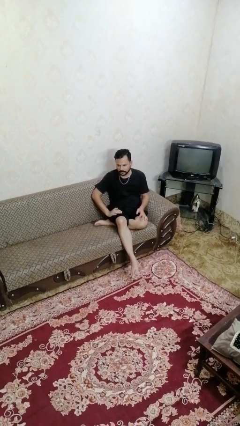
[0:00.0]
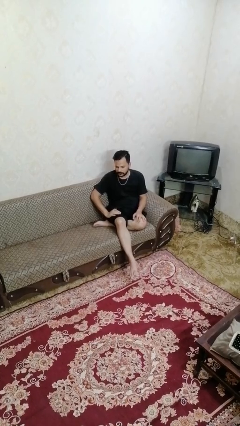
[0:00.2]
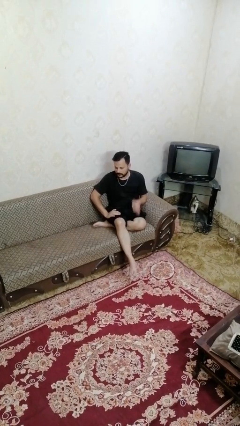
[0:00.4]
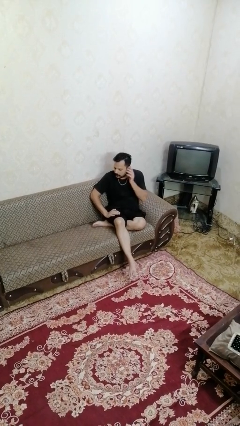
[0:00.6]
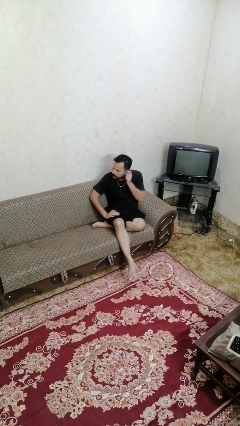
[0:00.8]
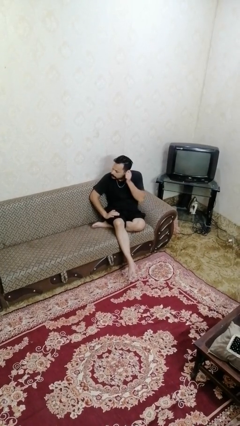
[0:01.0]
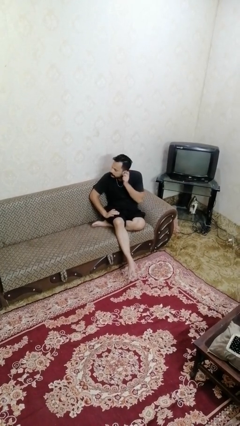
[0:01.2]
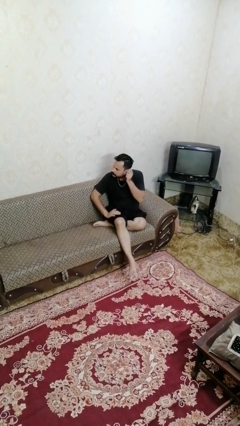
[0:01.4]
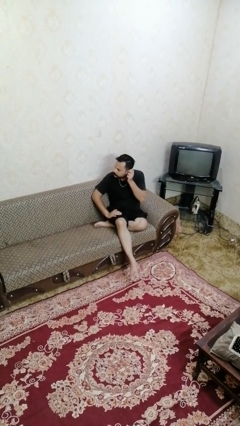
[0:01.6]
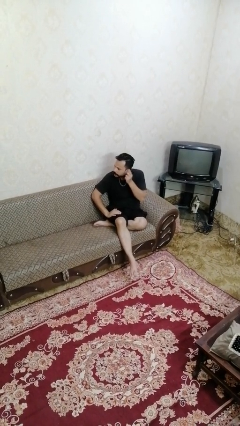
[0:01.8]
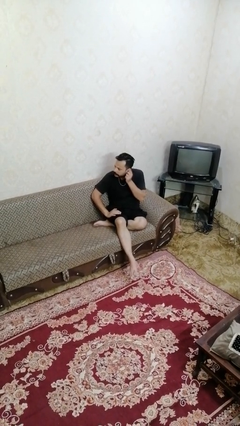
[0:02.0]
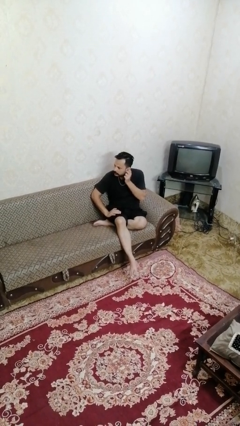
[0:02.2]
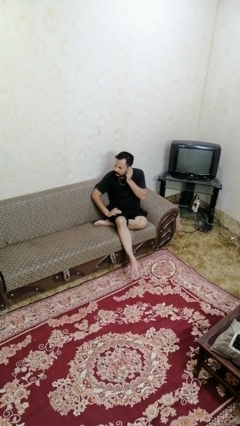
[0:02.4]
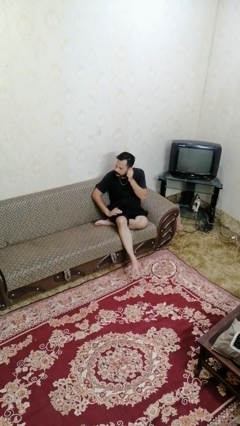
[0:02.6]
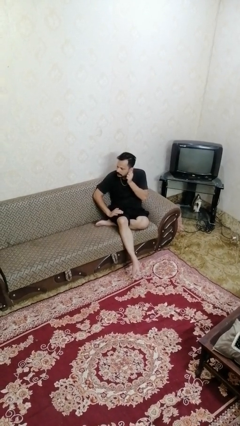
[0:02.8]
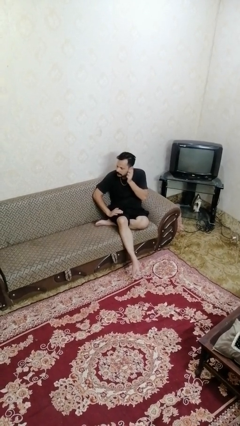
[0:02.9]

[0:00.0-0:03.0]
person touches earlobe

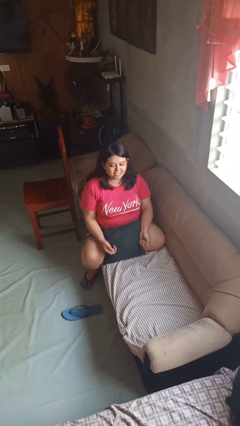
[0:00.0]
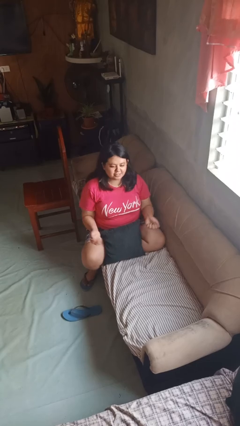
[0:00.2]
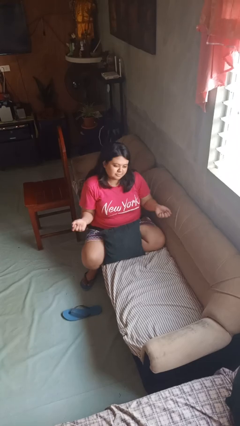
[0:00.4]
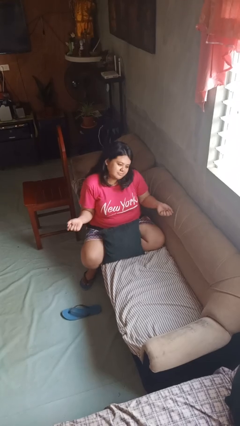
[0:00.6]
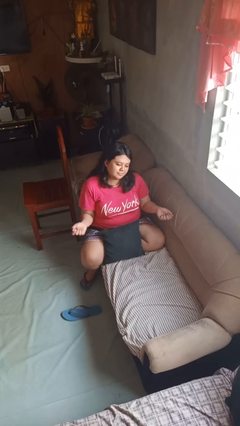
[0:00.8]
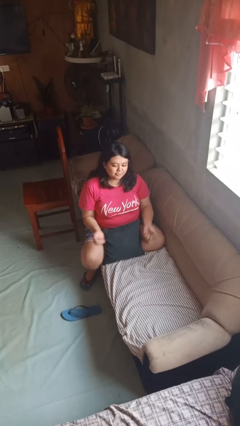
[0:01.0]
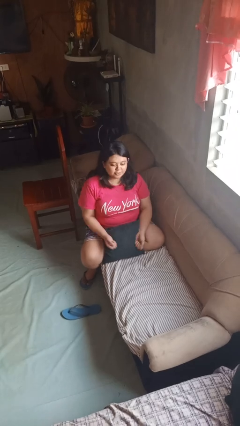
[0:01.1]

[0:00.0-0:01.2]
person shrugs

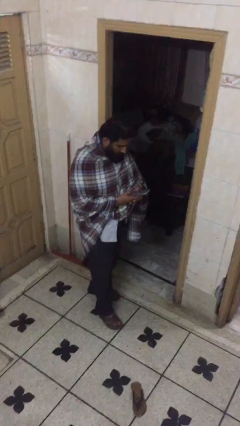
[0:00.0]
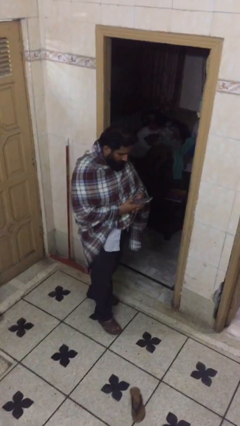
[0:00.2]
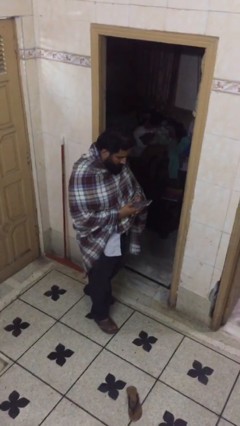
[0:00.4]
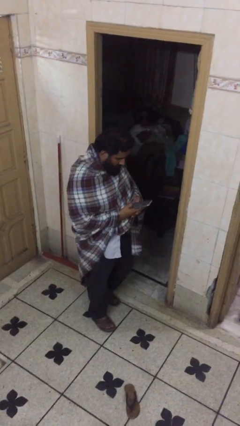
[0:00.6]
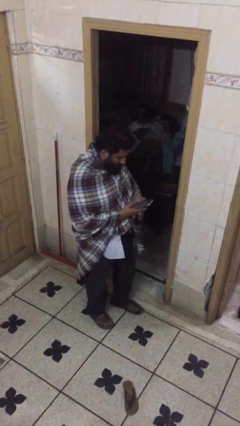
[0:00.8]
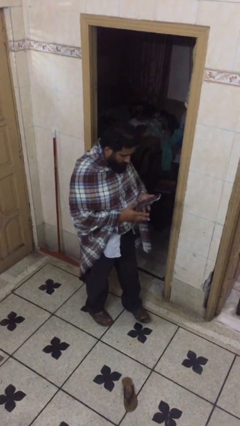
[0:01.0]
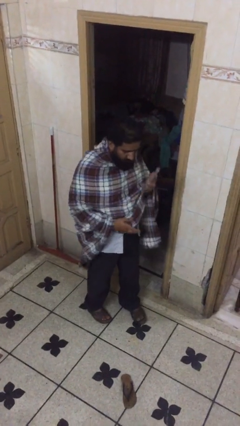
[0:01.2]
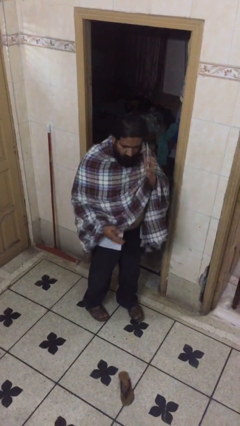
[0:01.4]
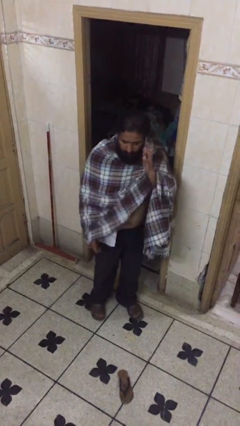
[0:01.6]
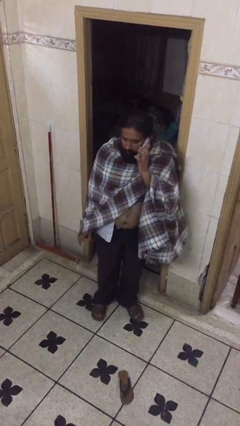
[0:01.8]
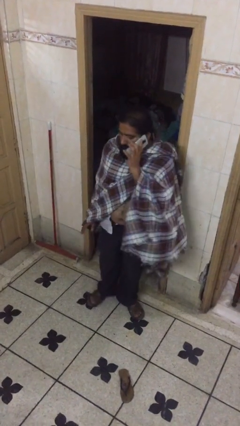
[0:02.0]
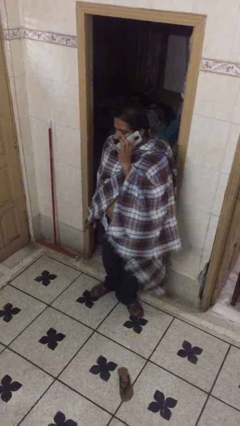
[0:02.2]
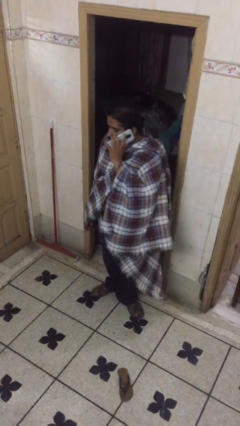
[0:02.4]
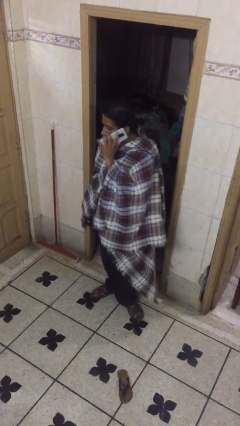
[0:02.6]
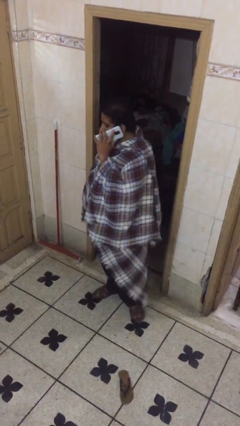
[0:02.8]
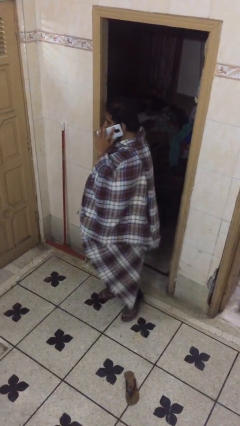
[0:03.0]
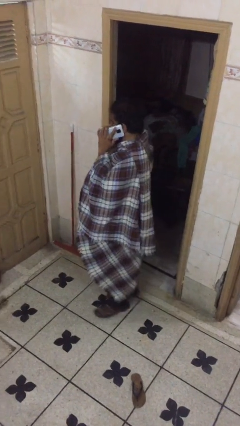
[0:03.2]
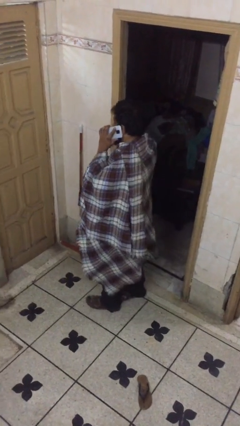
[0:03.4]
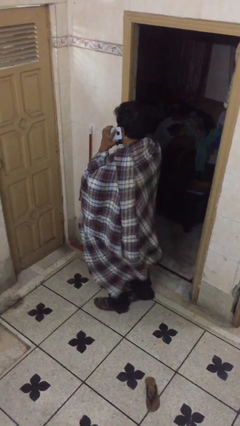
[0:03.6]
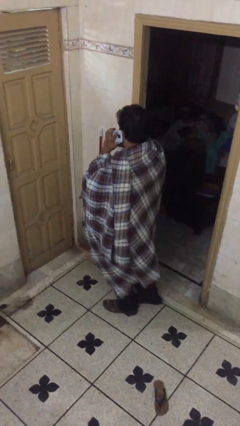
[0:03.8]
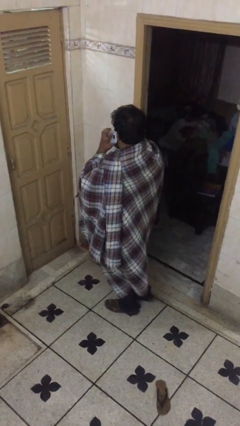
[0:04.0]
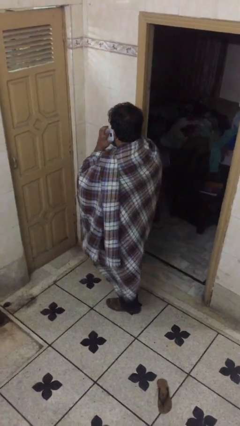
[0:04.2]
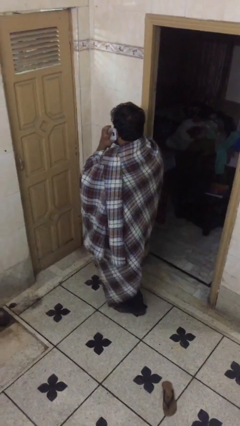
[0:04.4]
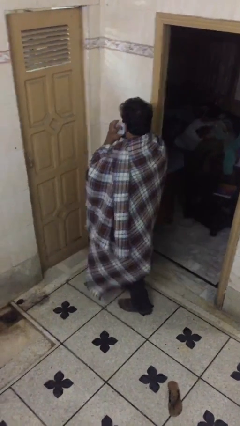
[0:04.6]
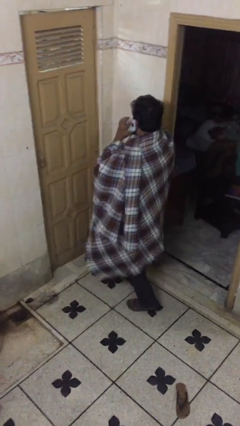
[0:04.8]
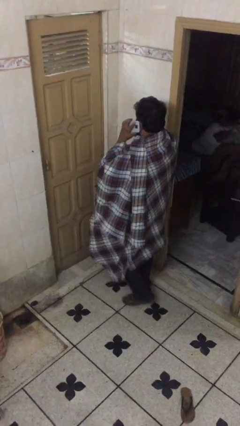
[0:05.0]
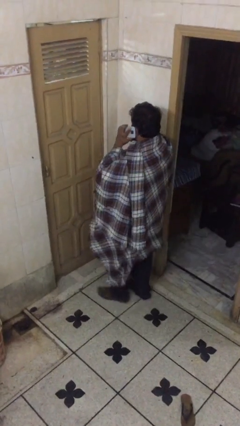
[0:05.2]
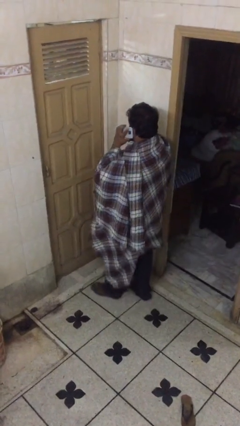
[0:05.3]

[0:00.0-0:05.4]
person talks on phone

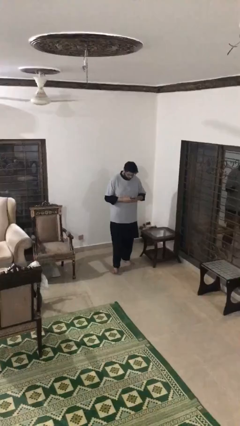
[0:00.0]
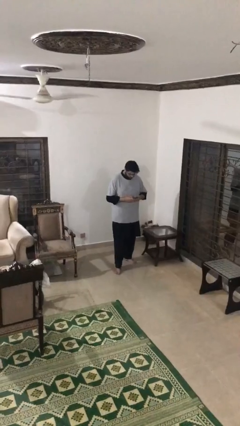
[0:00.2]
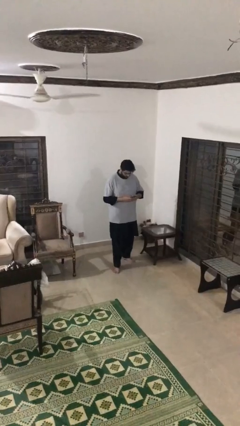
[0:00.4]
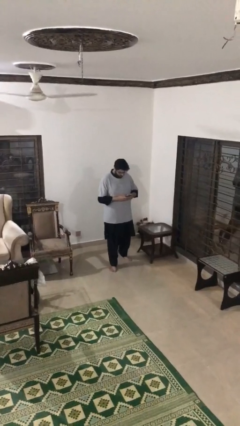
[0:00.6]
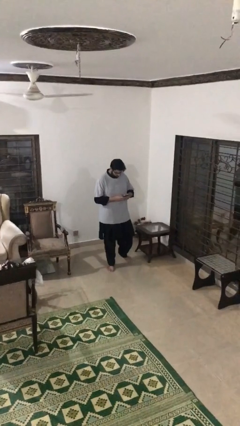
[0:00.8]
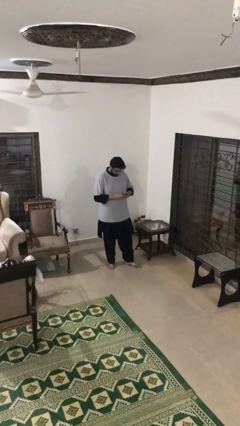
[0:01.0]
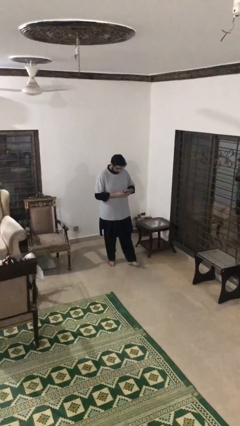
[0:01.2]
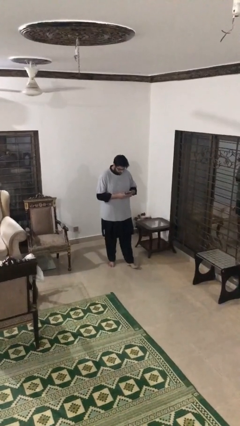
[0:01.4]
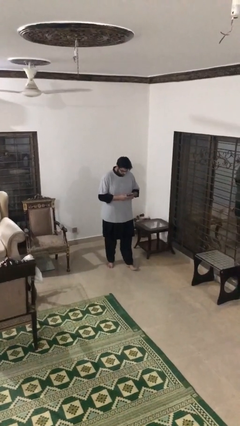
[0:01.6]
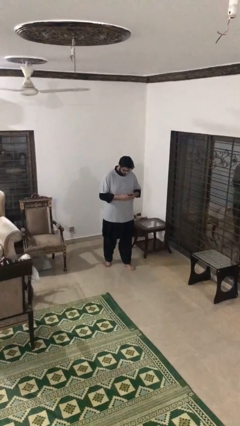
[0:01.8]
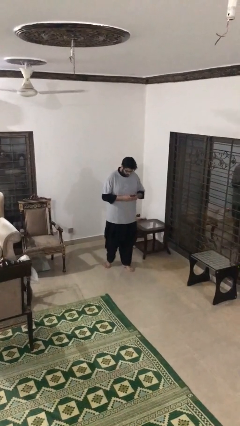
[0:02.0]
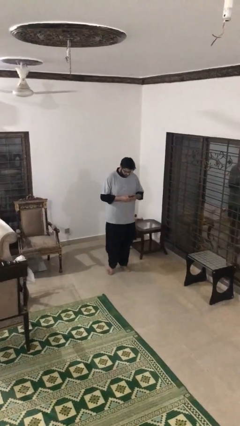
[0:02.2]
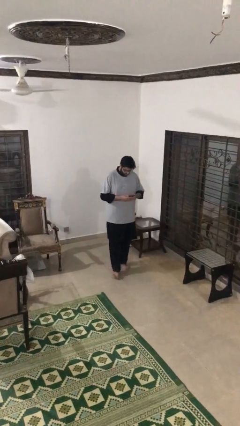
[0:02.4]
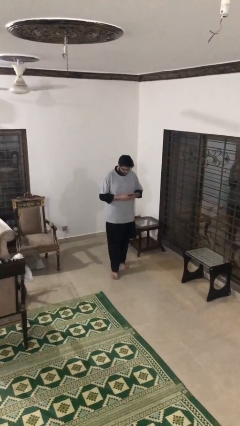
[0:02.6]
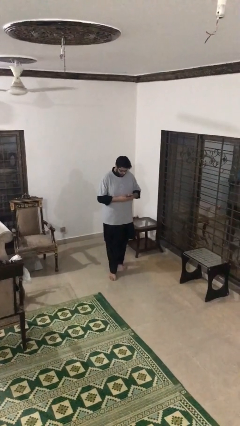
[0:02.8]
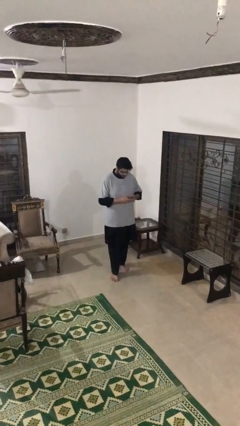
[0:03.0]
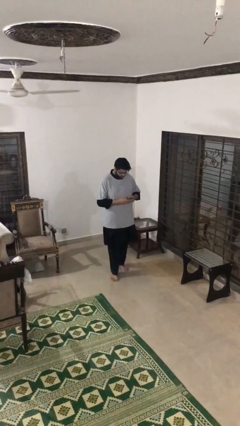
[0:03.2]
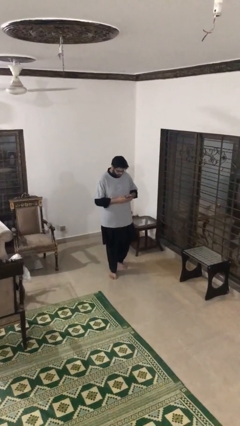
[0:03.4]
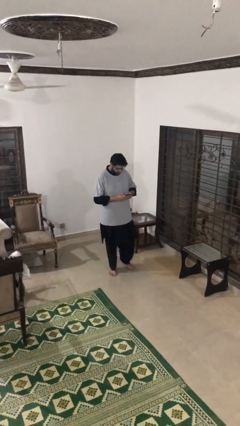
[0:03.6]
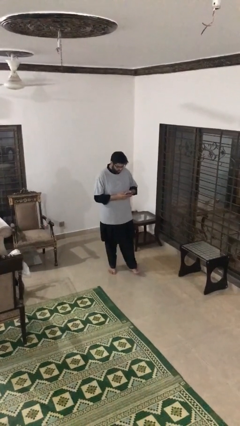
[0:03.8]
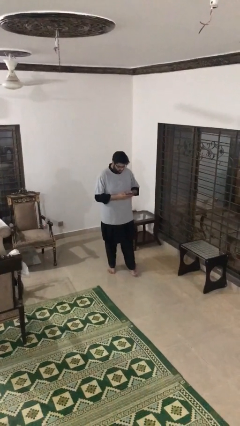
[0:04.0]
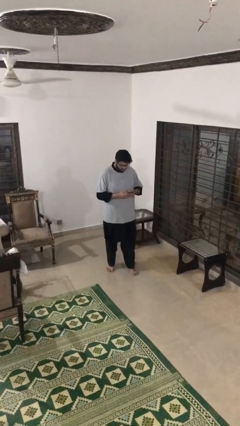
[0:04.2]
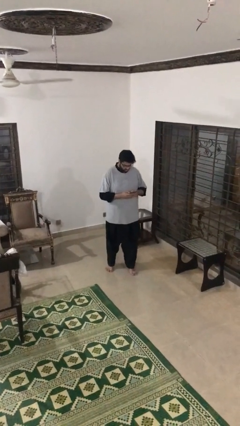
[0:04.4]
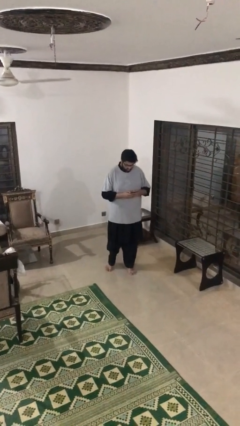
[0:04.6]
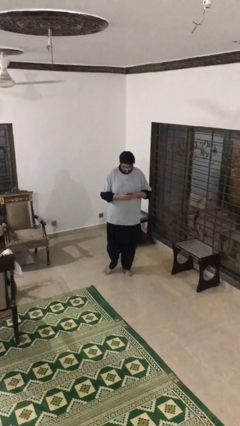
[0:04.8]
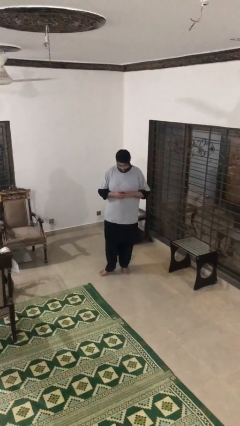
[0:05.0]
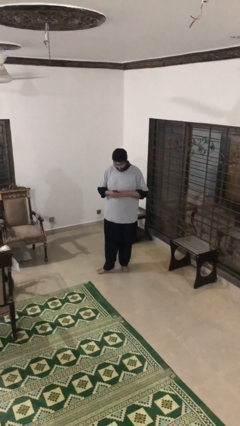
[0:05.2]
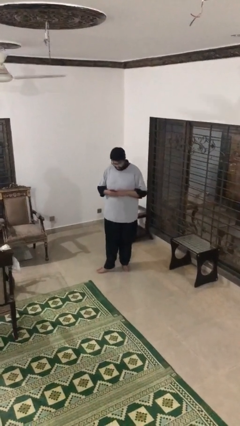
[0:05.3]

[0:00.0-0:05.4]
person texts on phone

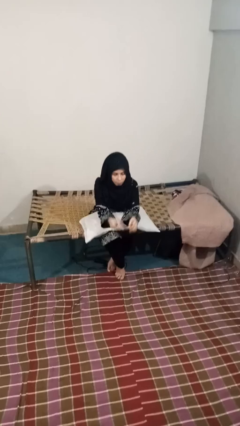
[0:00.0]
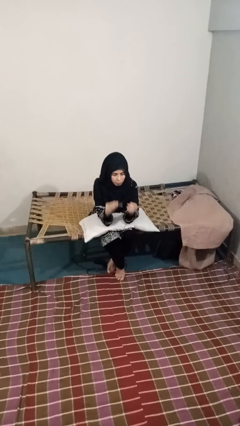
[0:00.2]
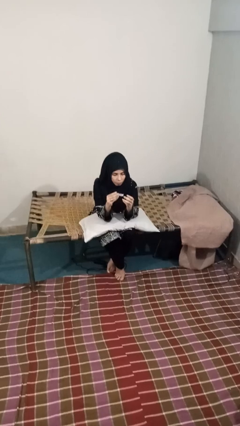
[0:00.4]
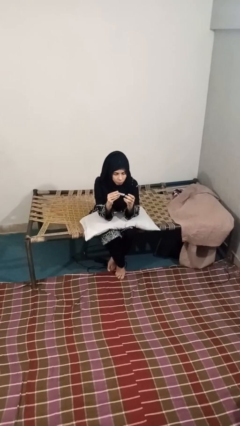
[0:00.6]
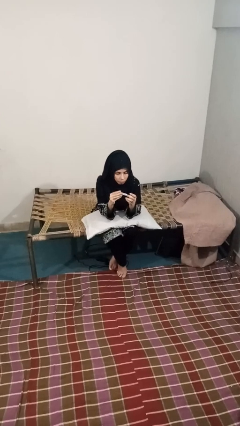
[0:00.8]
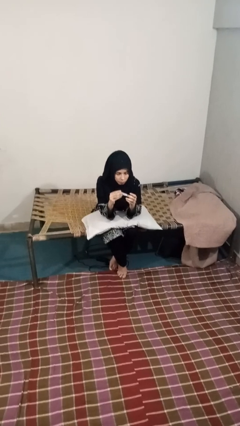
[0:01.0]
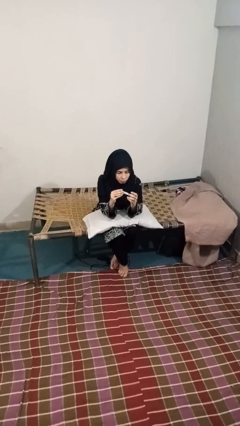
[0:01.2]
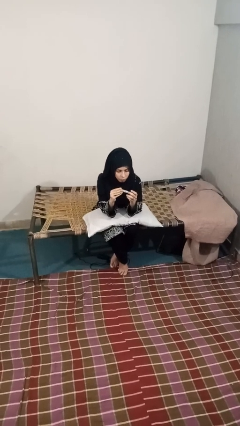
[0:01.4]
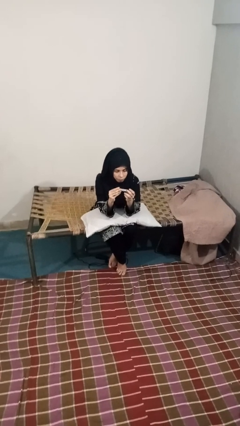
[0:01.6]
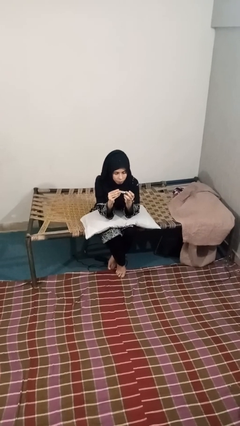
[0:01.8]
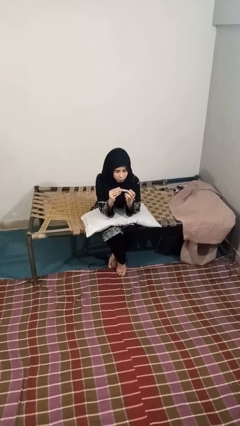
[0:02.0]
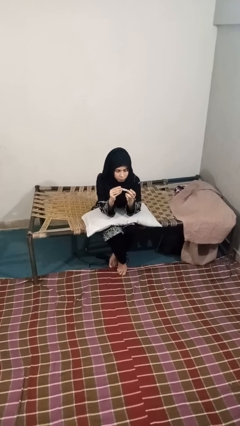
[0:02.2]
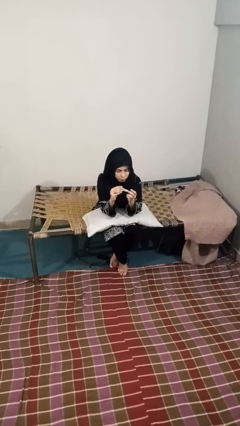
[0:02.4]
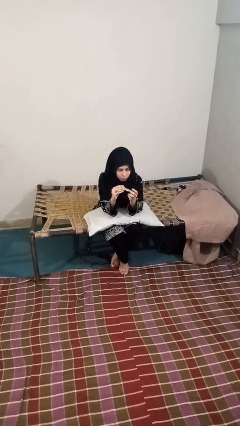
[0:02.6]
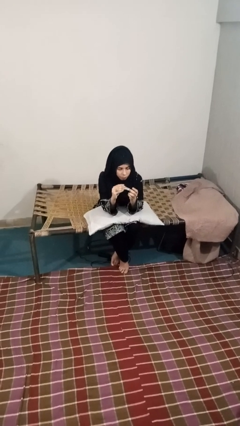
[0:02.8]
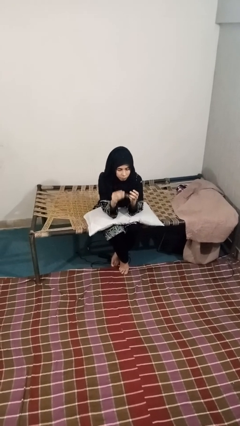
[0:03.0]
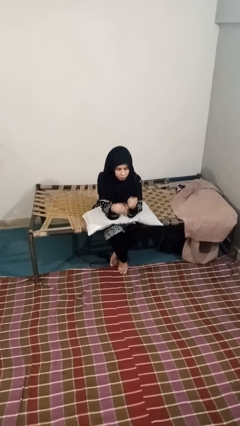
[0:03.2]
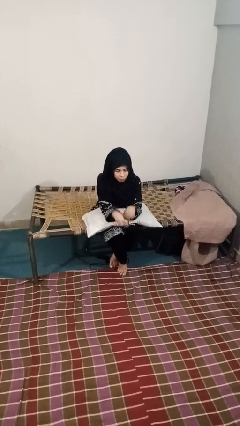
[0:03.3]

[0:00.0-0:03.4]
person clips fingernails
